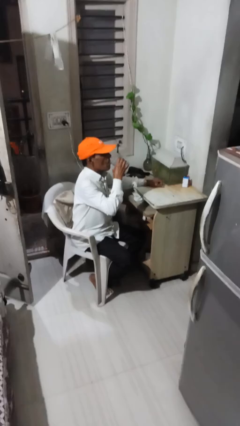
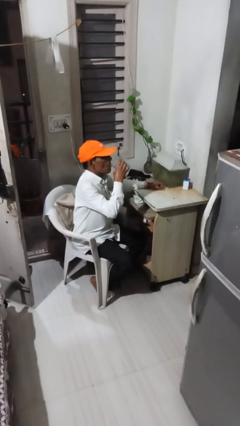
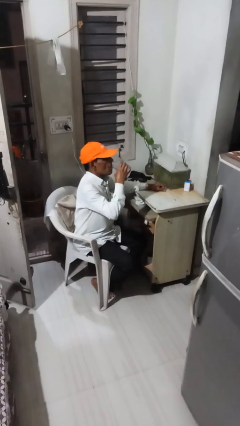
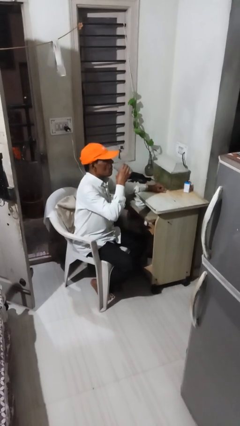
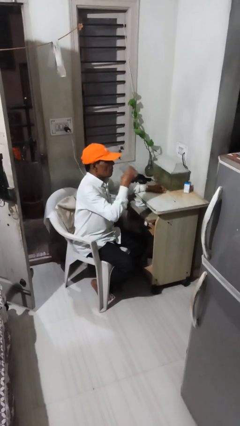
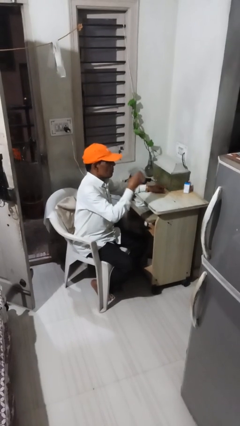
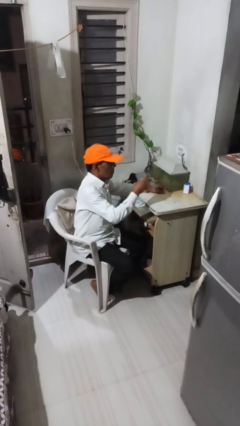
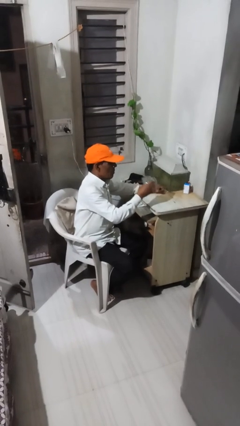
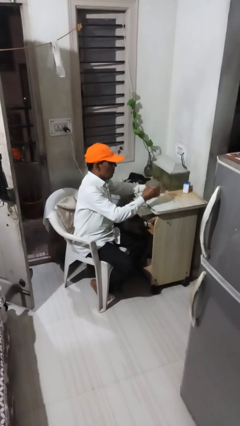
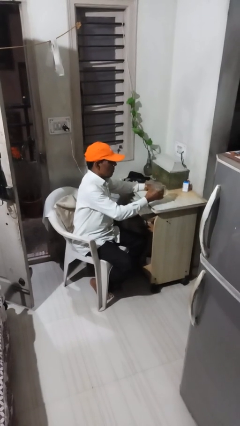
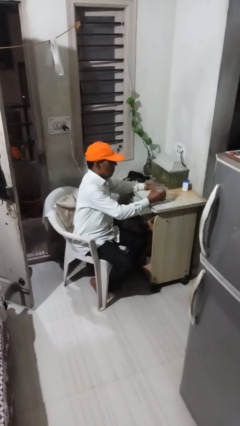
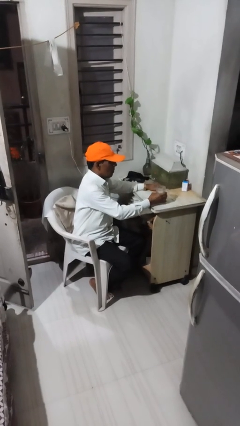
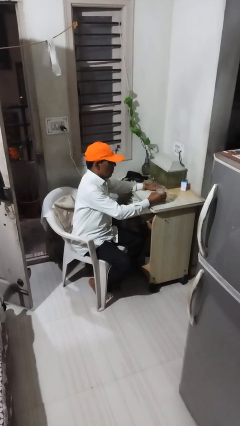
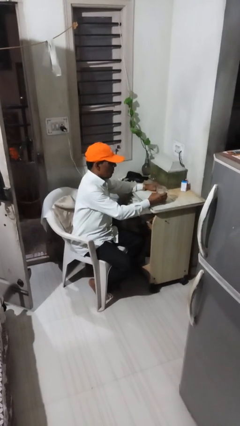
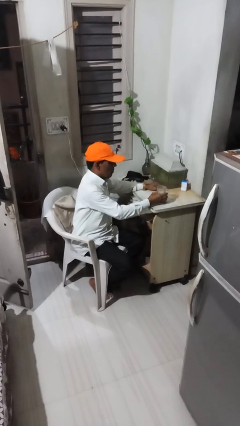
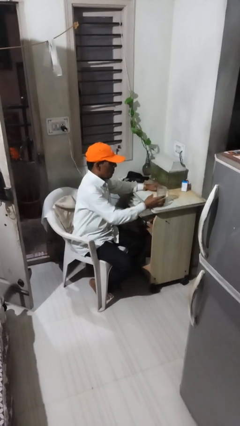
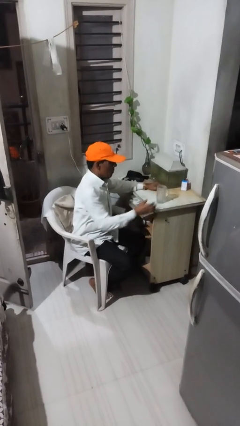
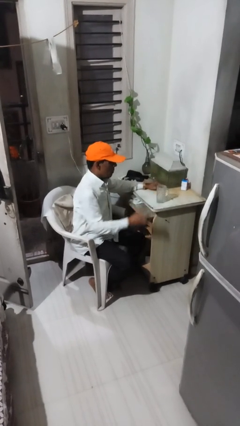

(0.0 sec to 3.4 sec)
person puts down object on table

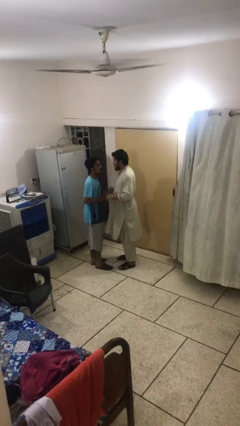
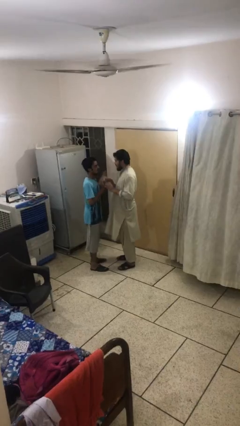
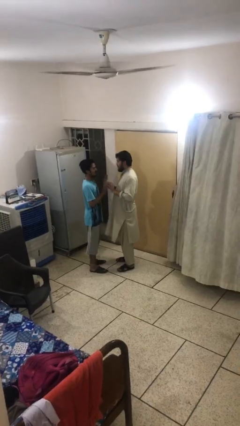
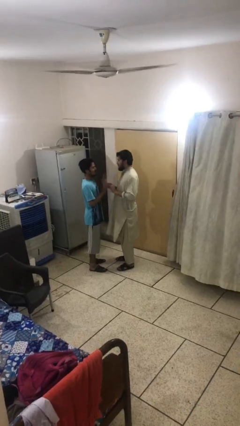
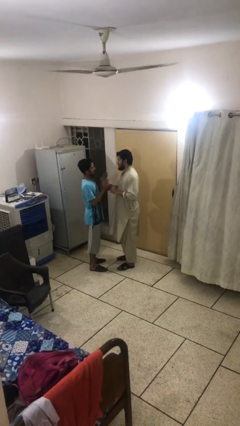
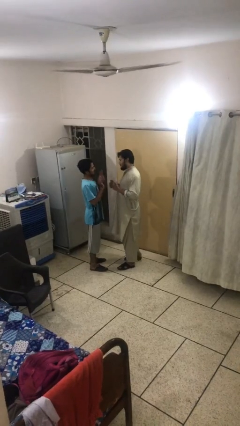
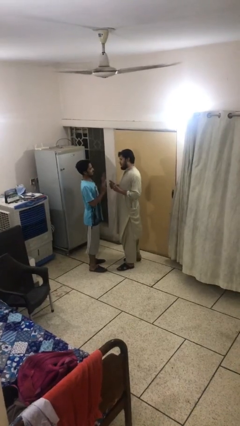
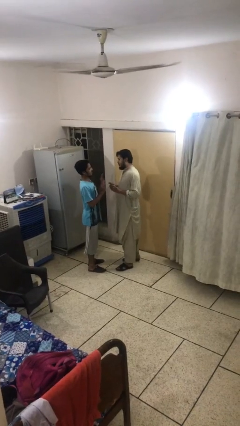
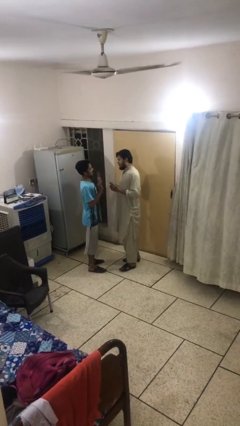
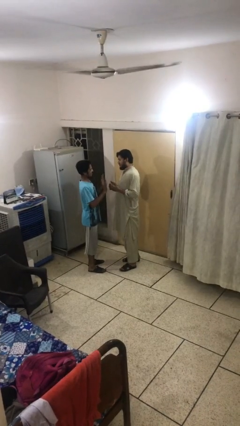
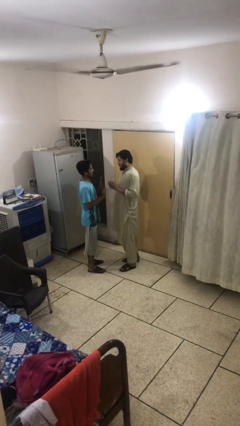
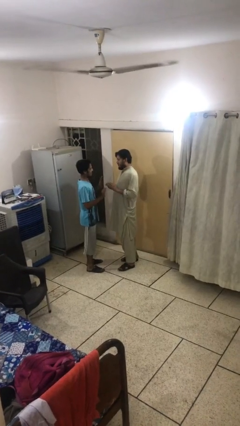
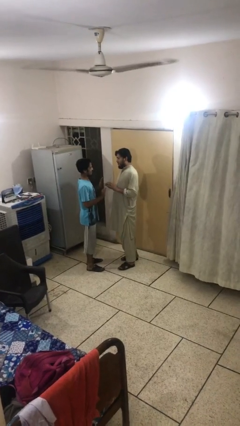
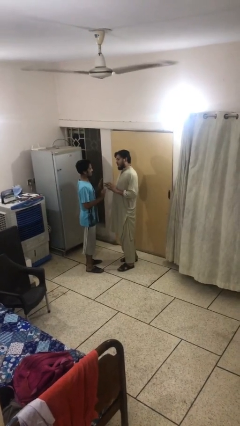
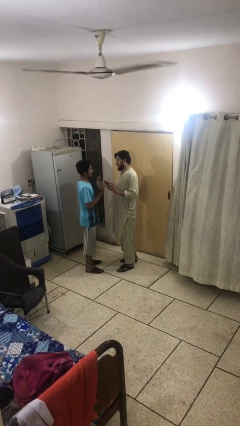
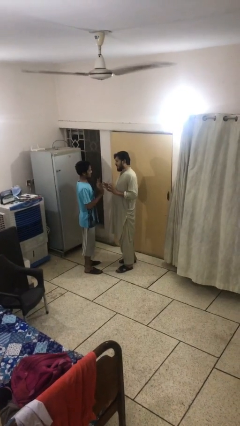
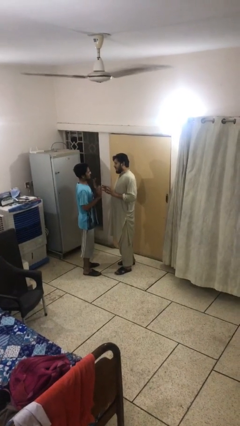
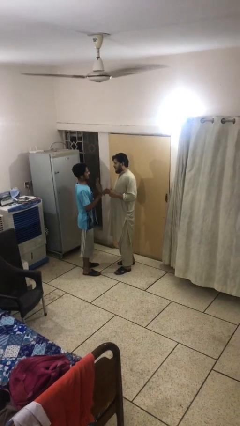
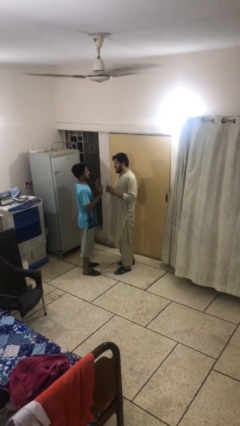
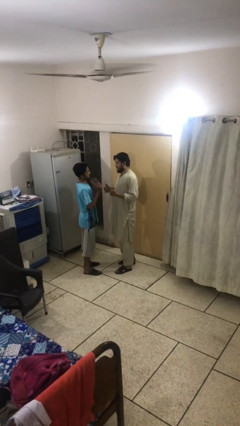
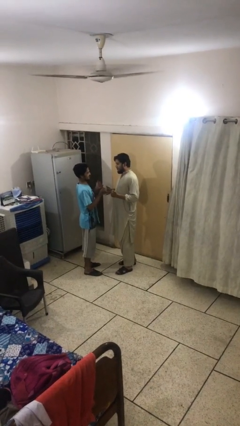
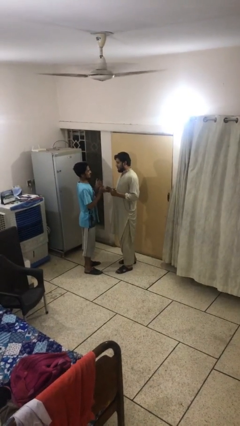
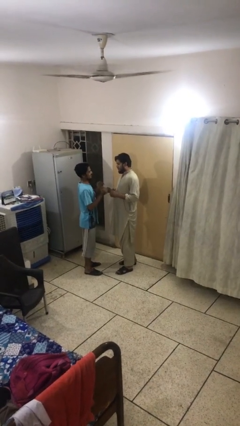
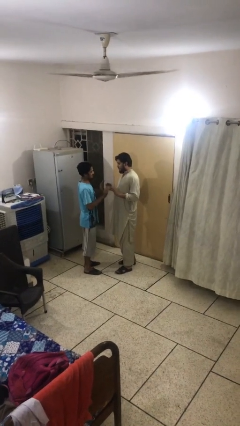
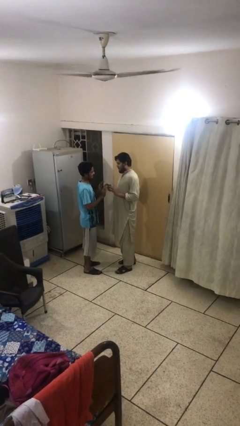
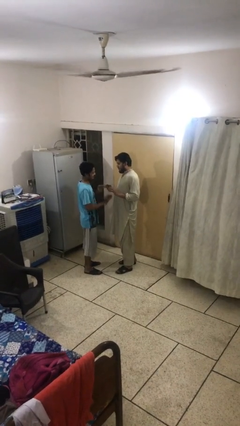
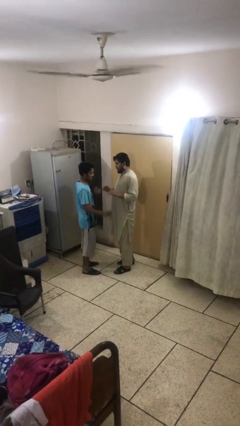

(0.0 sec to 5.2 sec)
person talks to person

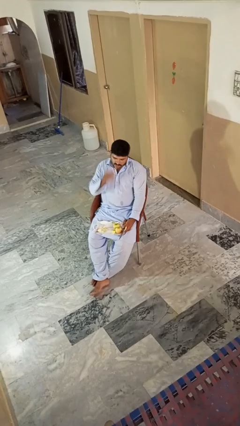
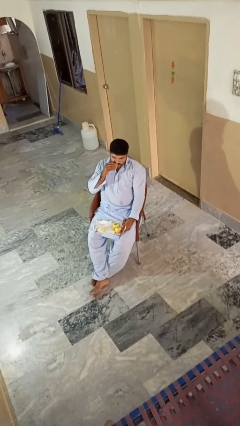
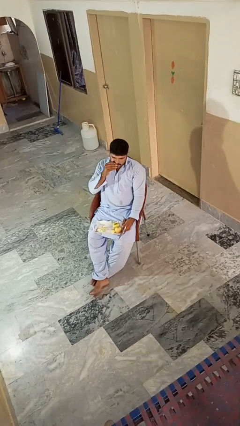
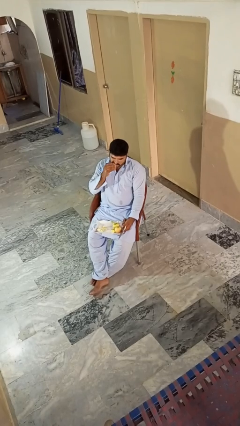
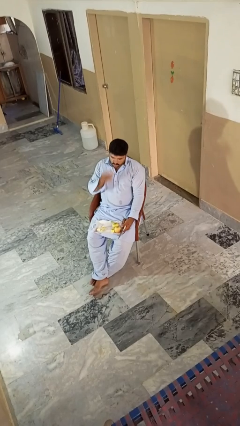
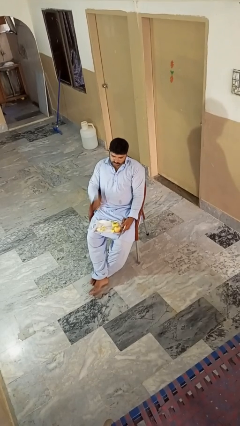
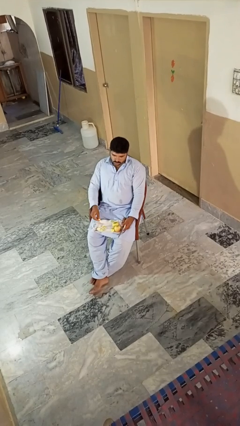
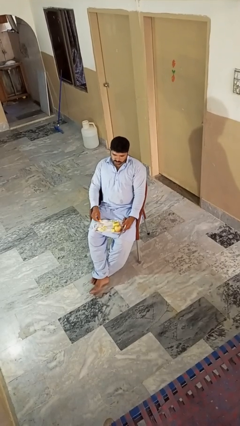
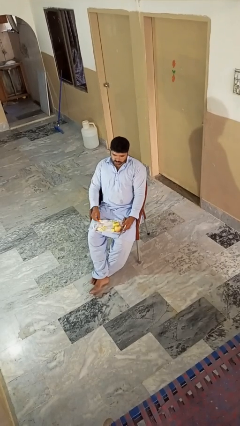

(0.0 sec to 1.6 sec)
person eats apple

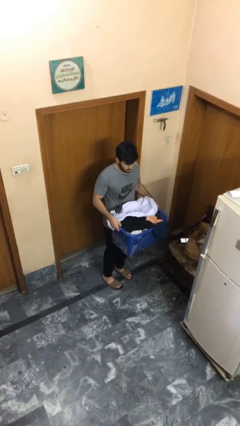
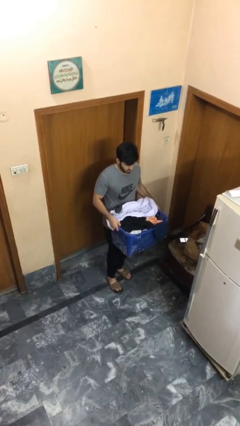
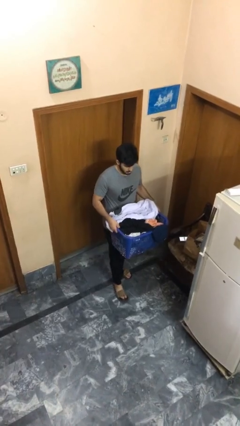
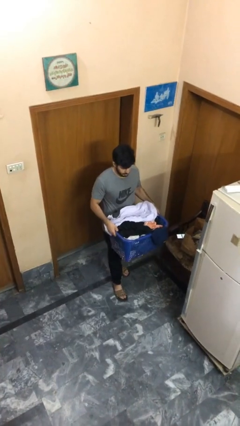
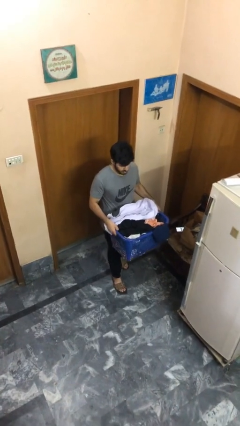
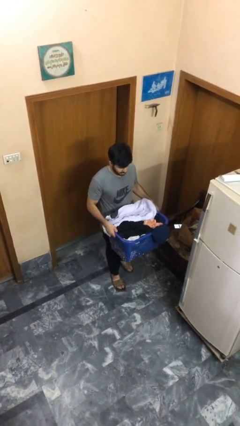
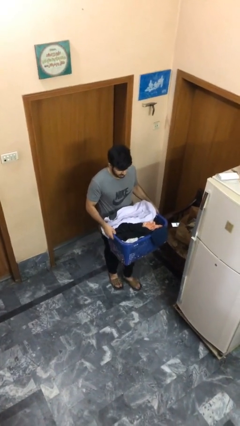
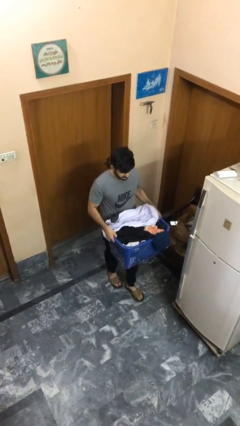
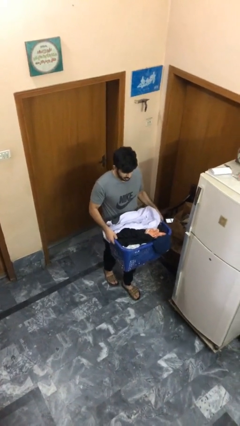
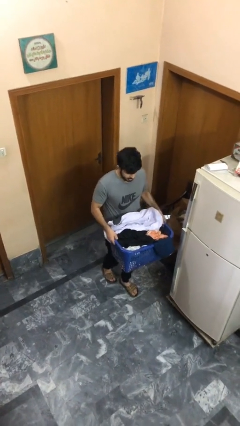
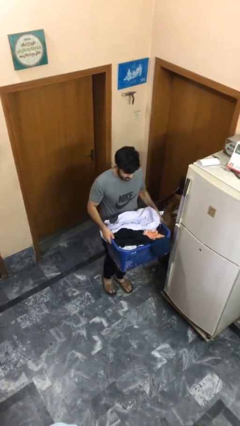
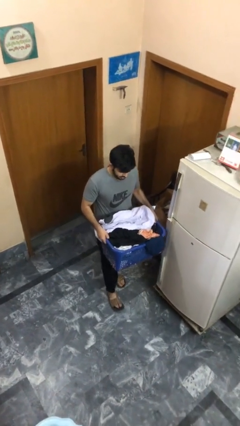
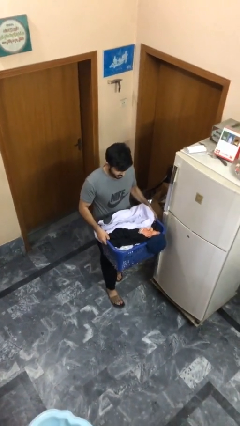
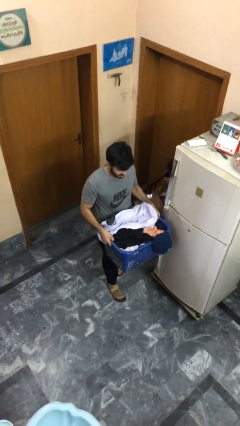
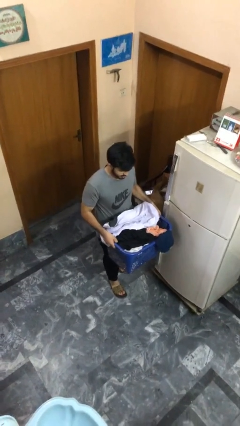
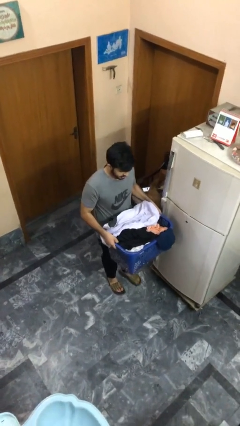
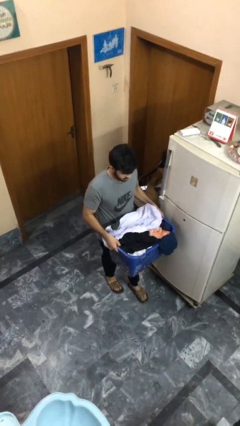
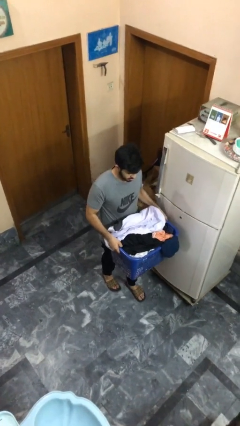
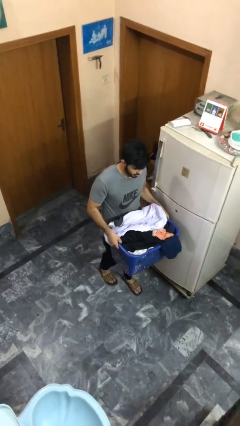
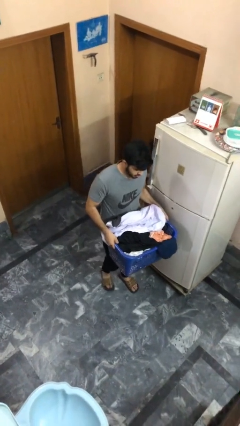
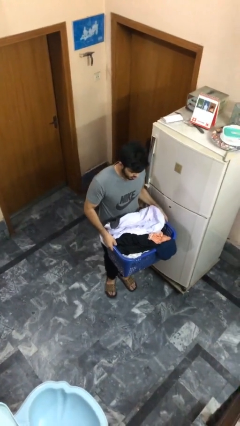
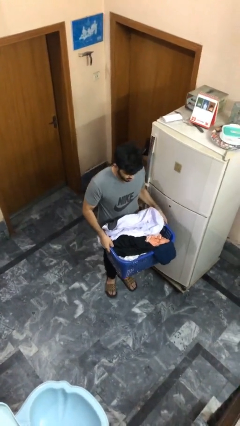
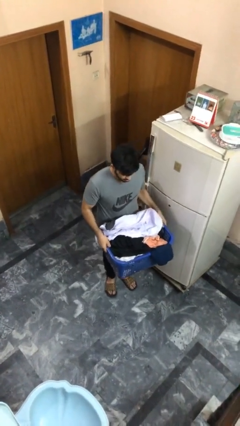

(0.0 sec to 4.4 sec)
person carries laundry basket

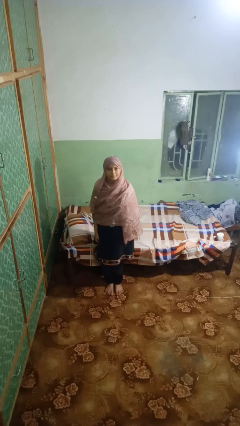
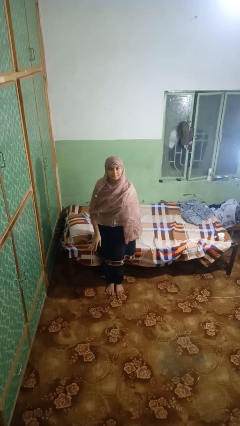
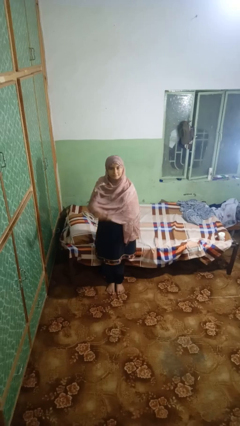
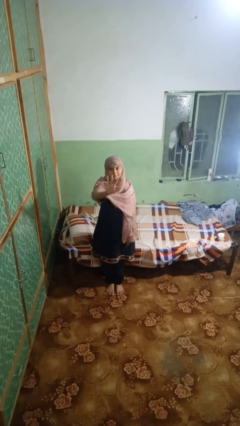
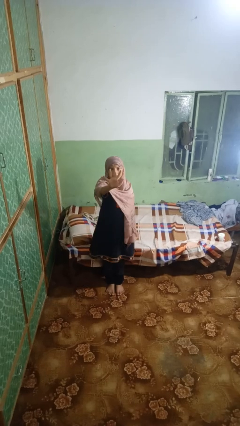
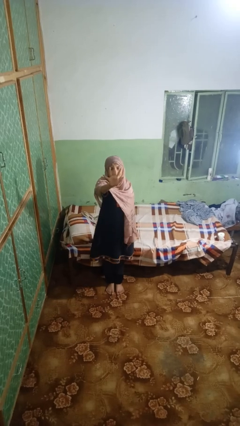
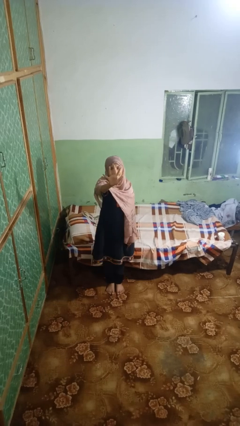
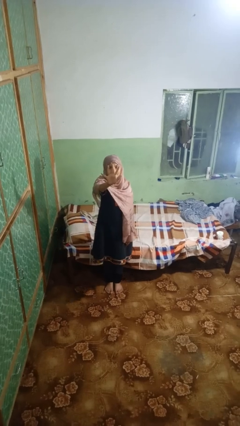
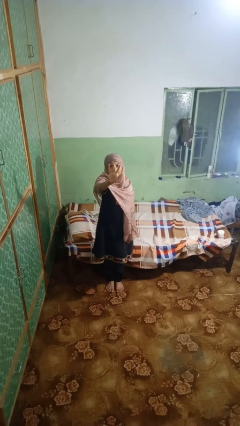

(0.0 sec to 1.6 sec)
person gestures number five

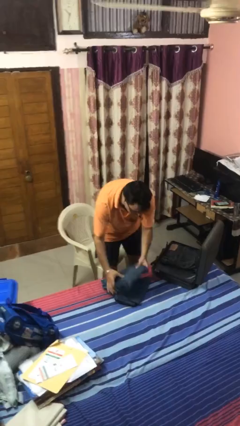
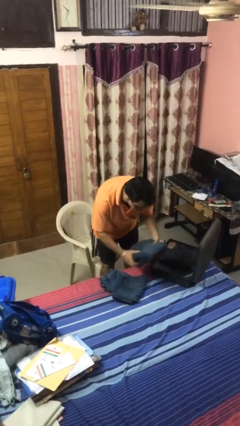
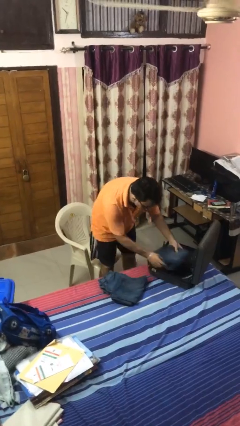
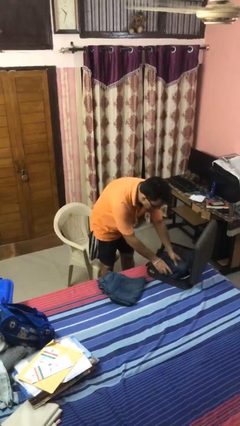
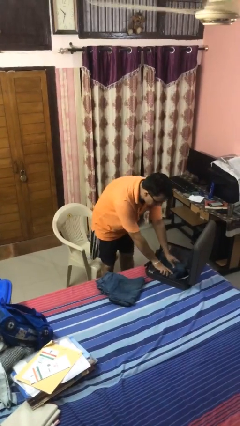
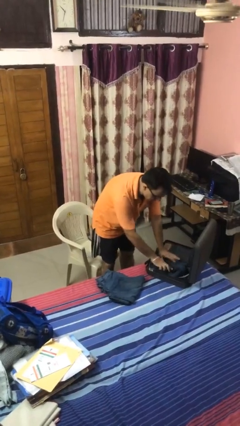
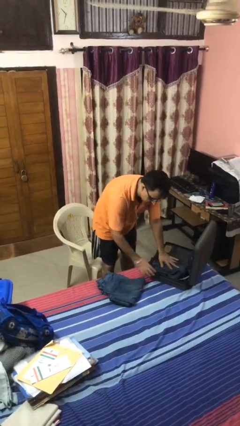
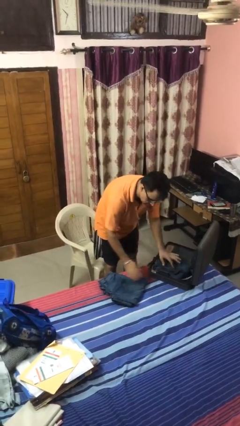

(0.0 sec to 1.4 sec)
person loads clothes into suitcase
